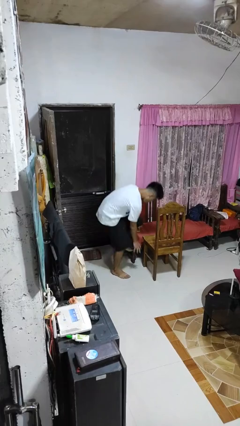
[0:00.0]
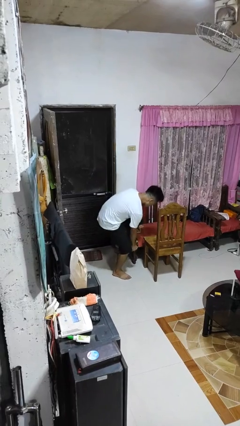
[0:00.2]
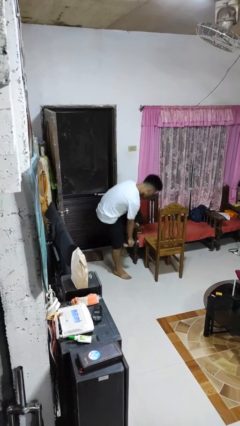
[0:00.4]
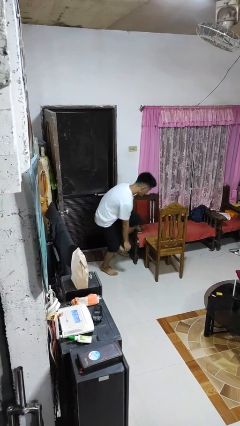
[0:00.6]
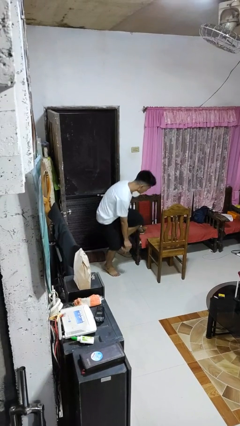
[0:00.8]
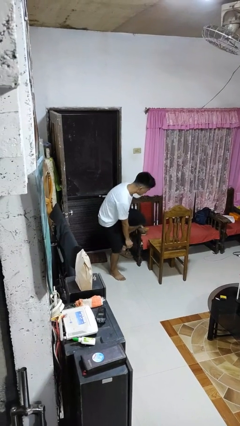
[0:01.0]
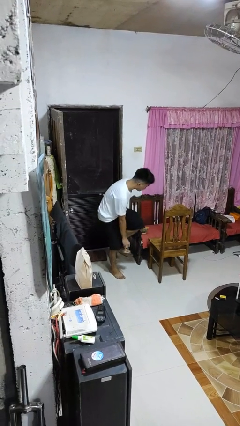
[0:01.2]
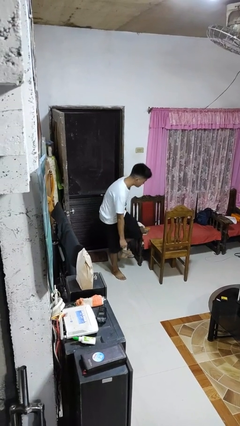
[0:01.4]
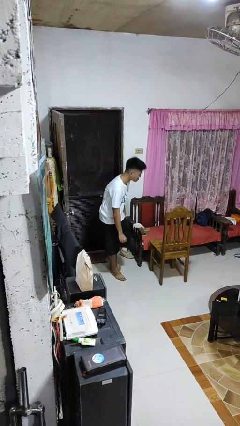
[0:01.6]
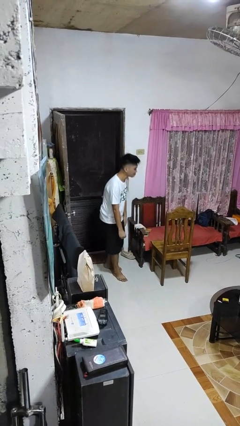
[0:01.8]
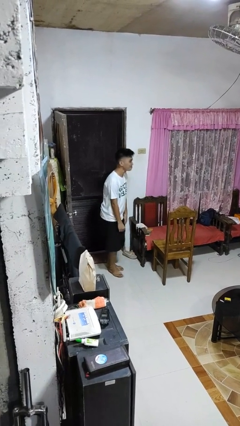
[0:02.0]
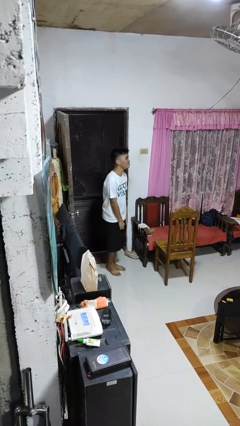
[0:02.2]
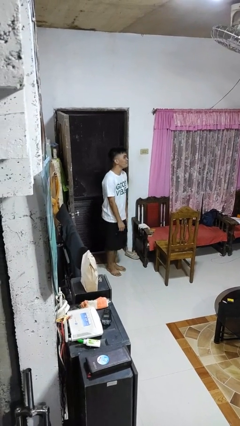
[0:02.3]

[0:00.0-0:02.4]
person stubs toe

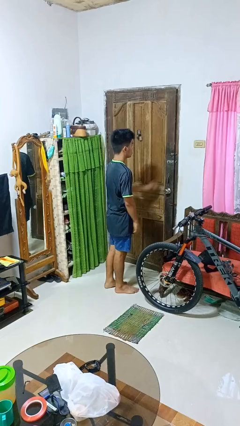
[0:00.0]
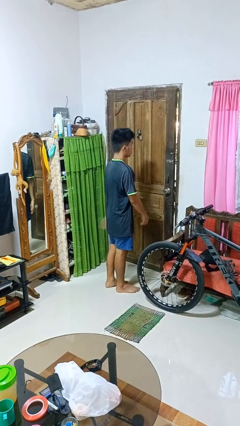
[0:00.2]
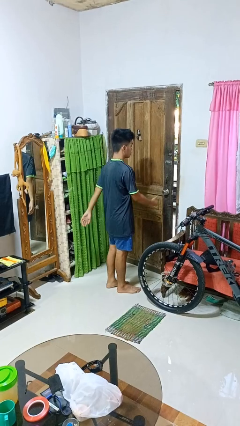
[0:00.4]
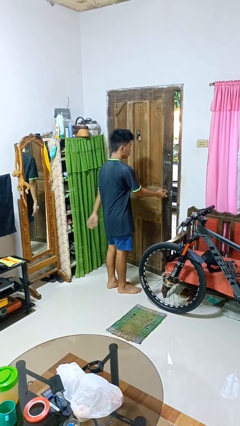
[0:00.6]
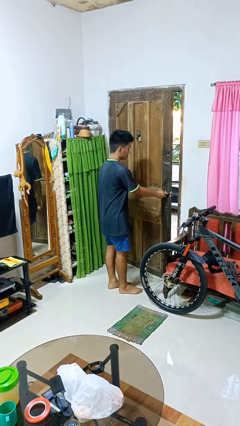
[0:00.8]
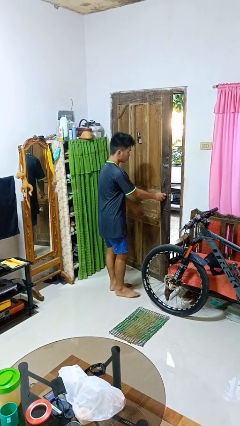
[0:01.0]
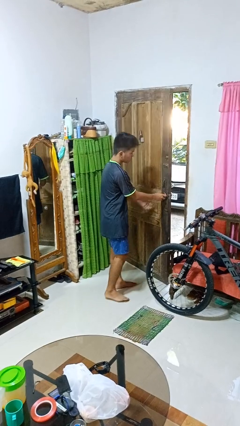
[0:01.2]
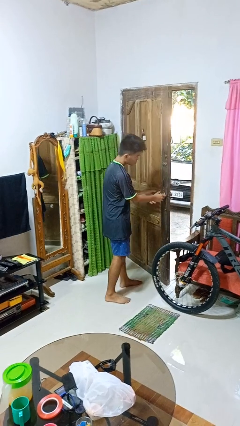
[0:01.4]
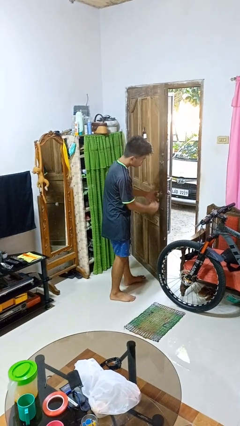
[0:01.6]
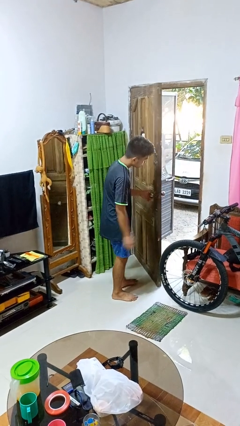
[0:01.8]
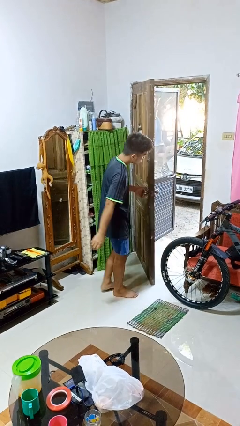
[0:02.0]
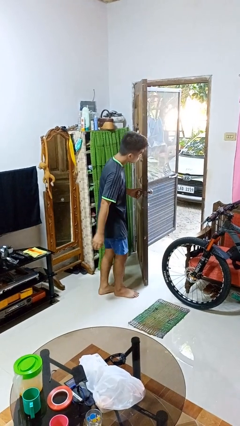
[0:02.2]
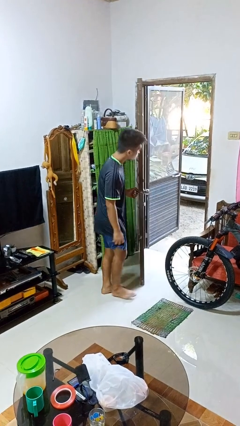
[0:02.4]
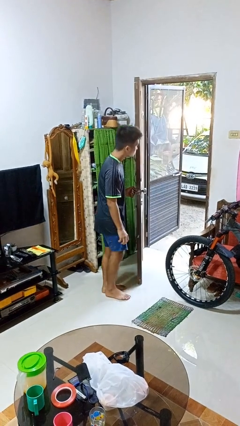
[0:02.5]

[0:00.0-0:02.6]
person opens facility door

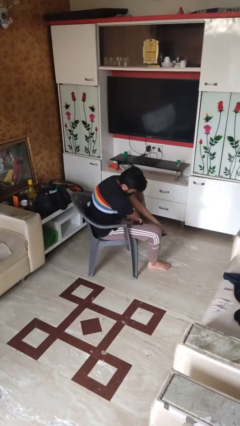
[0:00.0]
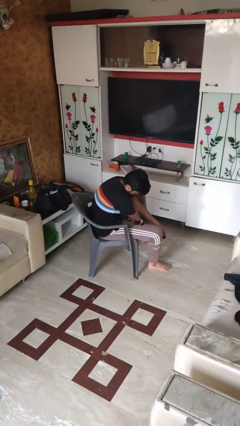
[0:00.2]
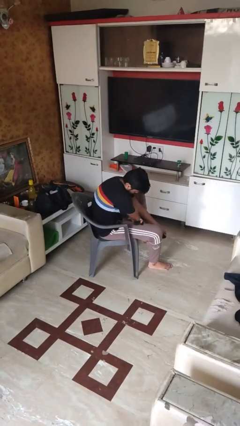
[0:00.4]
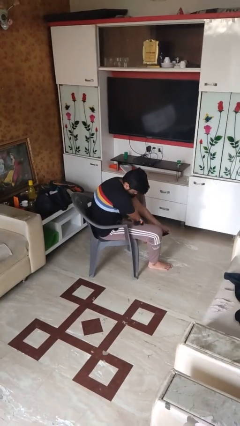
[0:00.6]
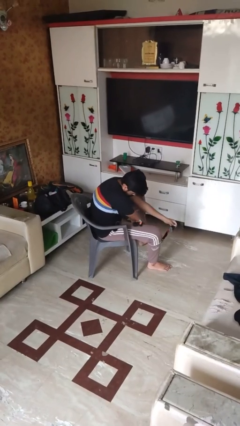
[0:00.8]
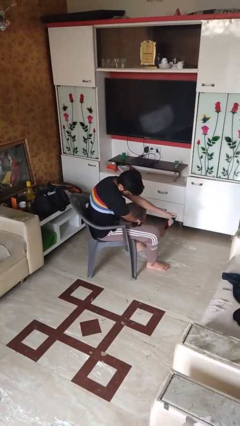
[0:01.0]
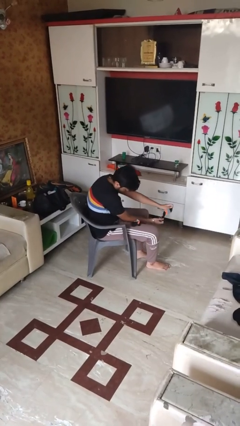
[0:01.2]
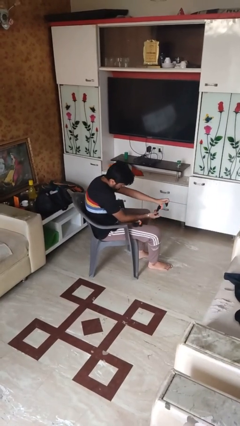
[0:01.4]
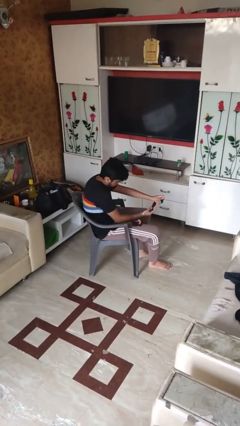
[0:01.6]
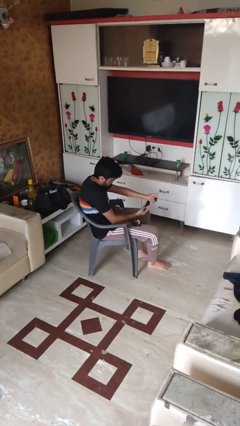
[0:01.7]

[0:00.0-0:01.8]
person takes off socks

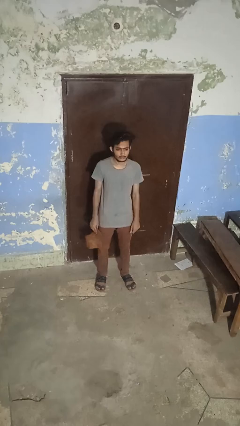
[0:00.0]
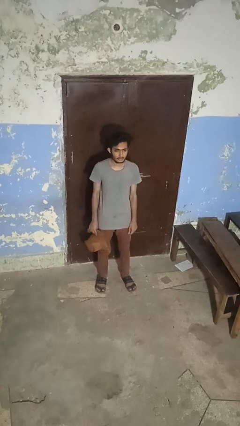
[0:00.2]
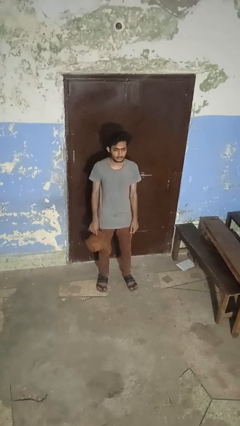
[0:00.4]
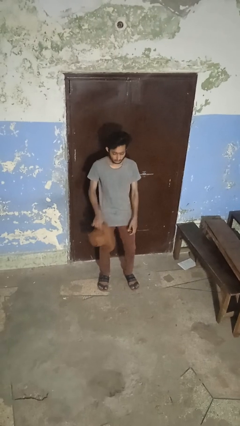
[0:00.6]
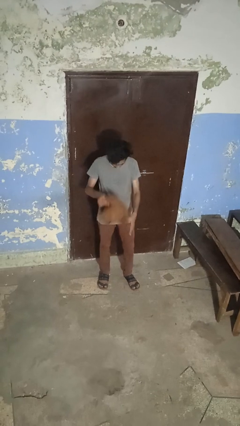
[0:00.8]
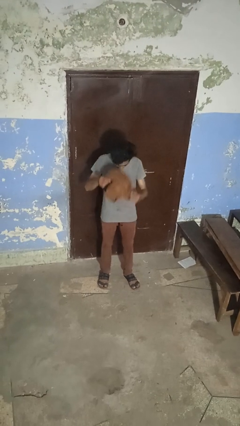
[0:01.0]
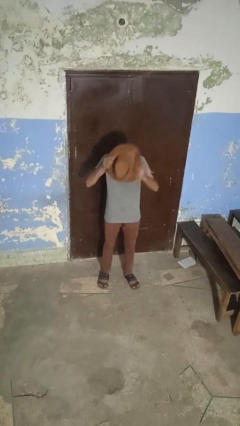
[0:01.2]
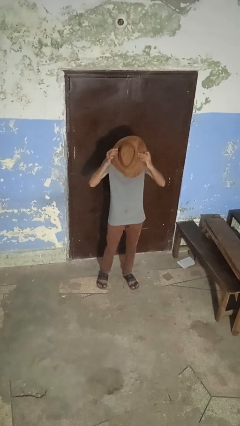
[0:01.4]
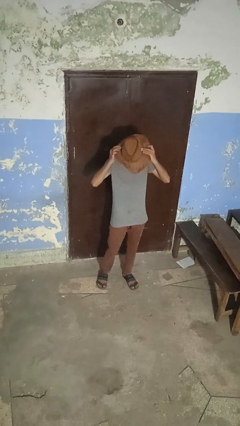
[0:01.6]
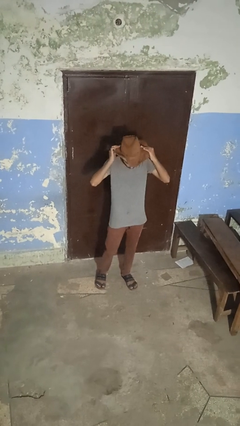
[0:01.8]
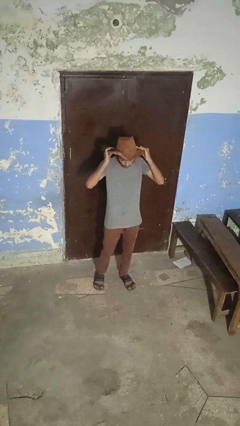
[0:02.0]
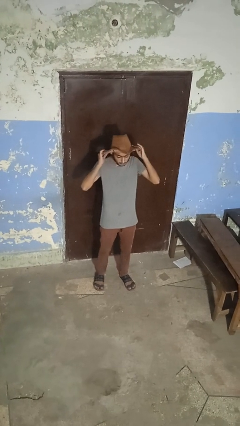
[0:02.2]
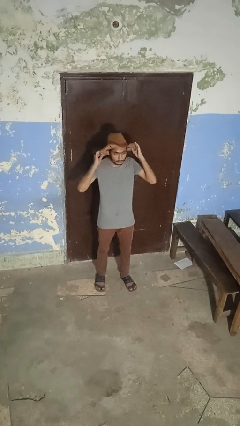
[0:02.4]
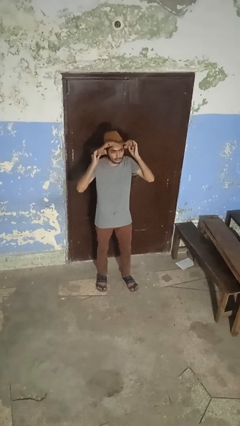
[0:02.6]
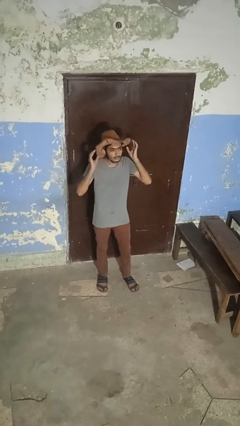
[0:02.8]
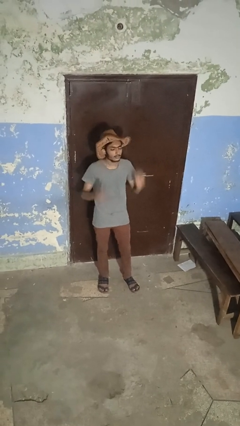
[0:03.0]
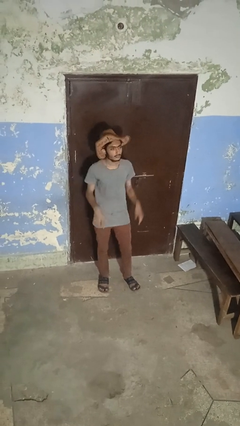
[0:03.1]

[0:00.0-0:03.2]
person puts on hat

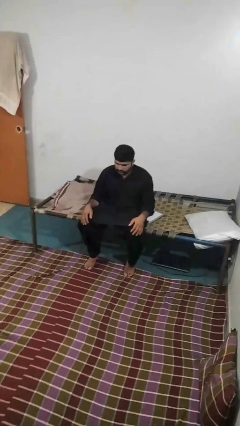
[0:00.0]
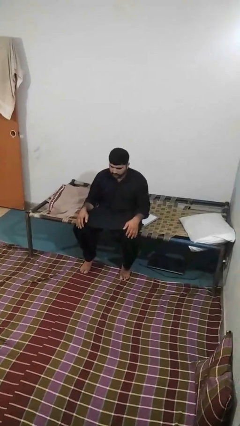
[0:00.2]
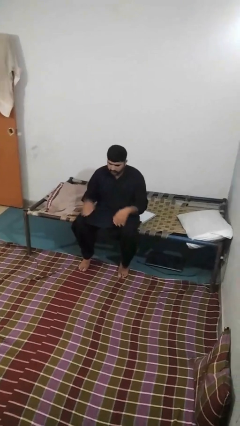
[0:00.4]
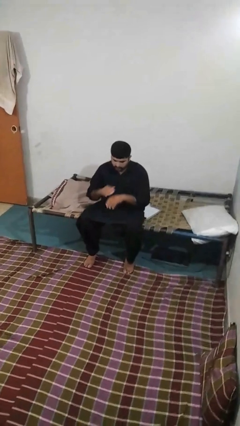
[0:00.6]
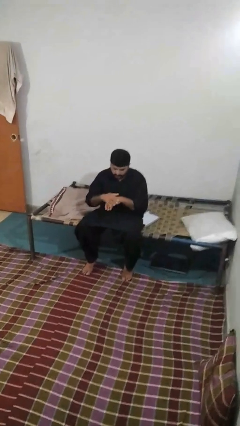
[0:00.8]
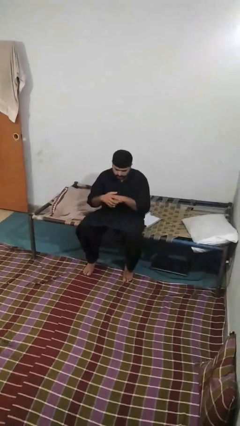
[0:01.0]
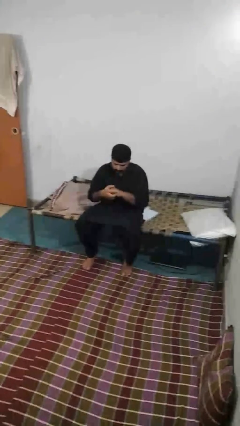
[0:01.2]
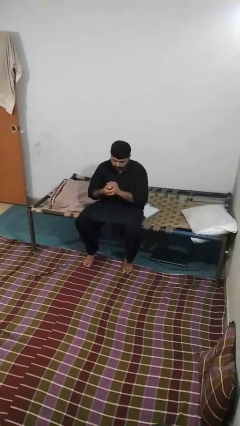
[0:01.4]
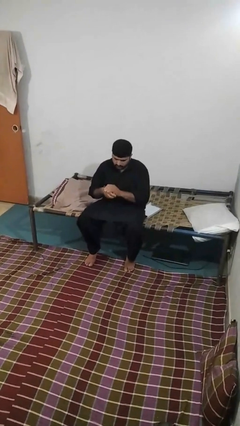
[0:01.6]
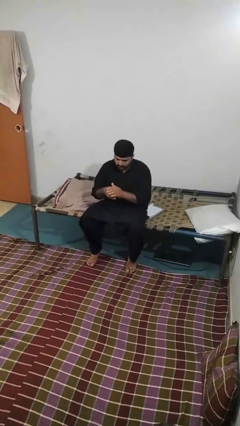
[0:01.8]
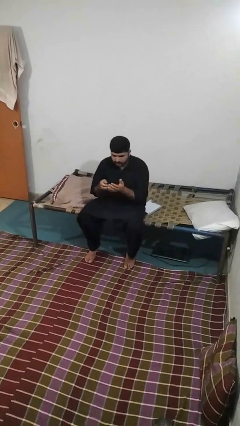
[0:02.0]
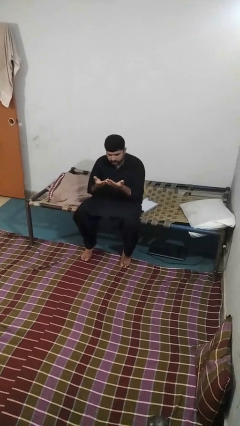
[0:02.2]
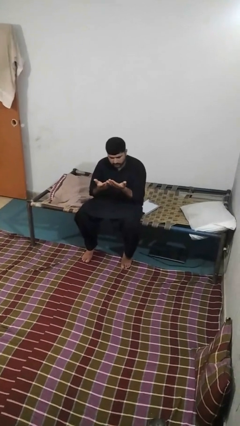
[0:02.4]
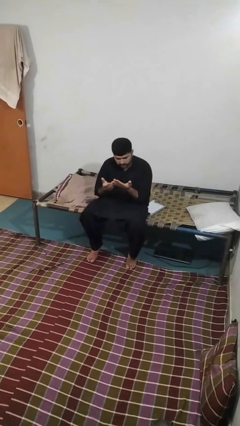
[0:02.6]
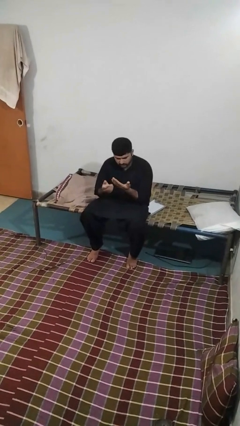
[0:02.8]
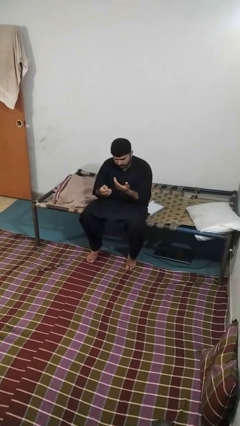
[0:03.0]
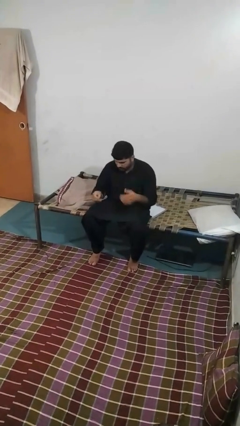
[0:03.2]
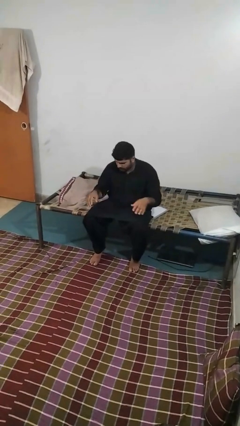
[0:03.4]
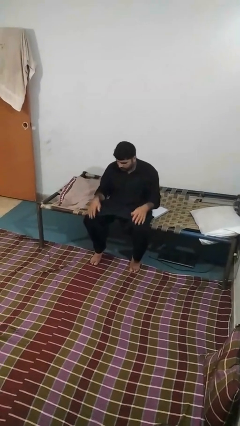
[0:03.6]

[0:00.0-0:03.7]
person looks at hands in lap

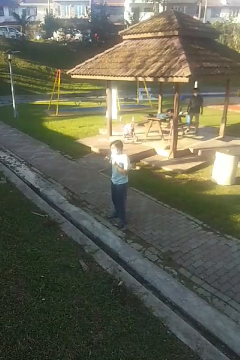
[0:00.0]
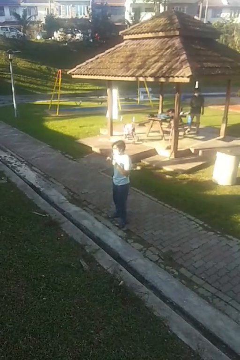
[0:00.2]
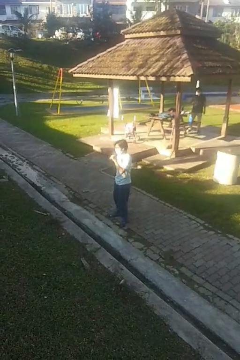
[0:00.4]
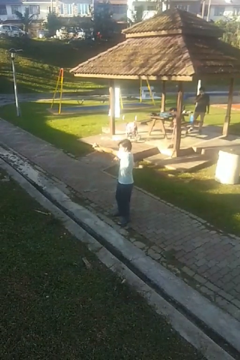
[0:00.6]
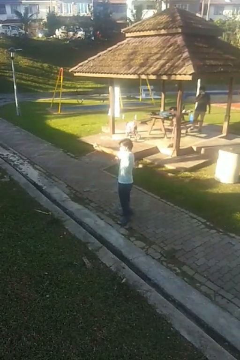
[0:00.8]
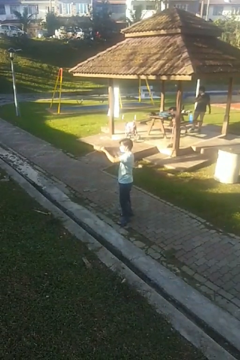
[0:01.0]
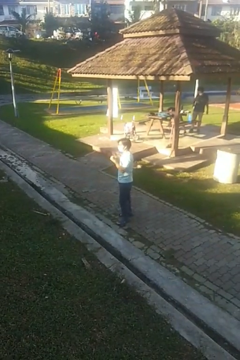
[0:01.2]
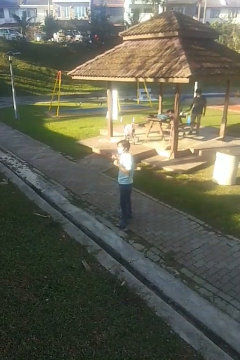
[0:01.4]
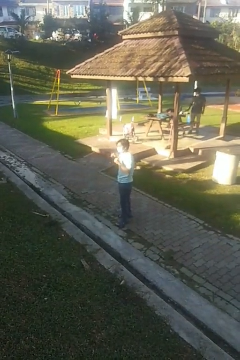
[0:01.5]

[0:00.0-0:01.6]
person punches

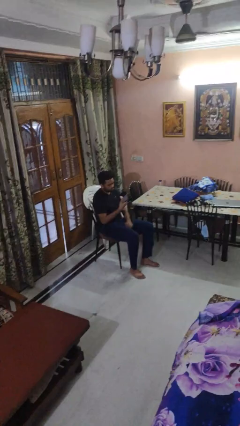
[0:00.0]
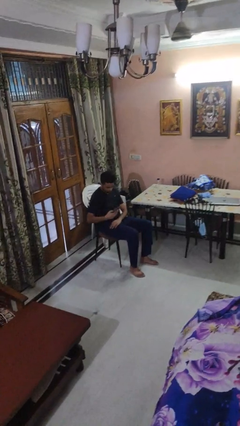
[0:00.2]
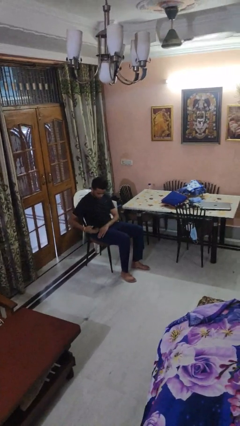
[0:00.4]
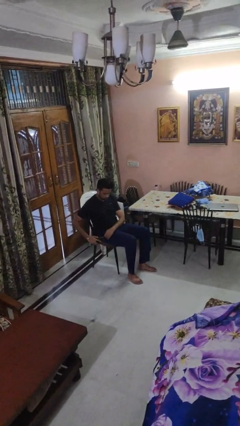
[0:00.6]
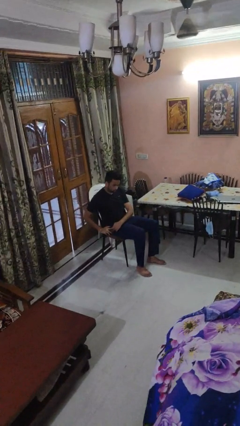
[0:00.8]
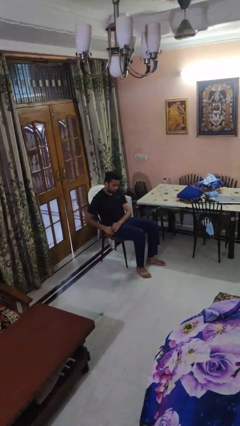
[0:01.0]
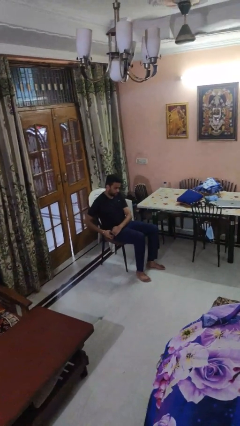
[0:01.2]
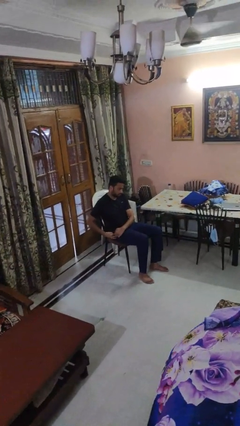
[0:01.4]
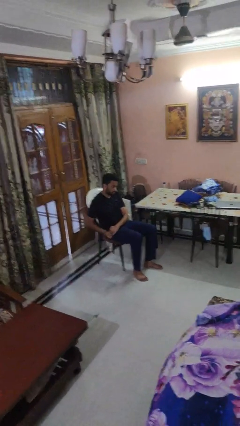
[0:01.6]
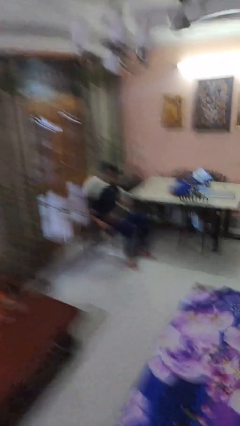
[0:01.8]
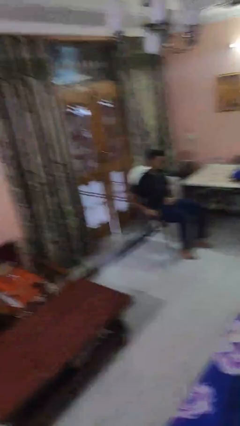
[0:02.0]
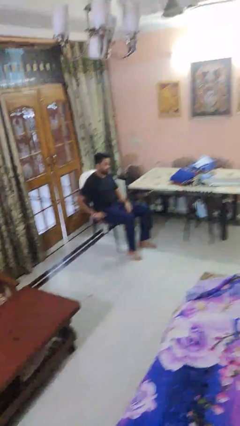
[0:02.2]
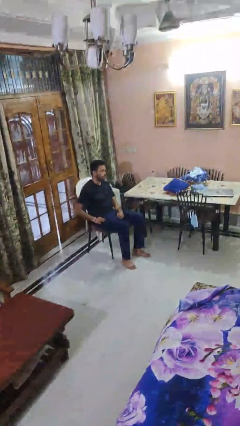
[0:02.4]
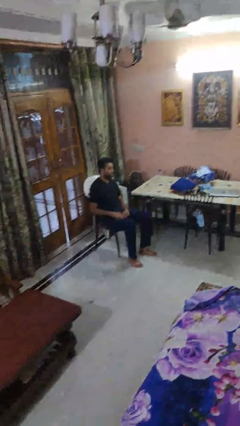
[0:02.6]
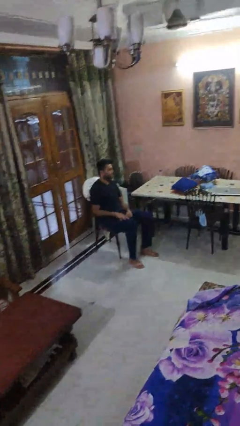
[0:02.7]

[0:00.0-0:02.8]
person puts phone into pocket
